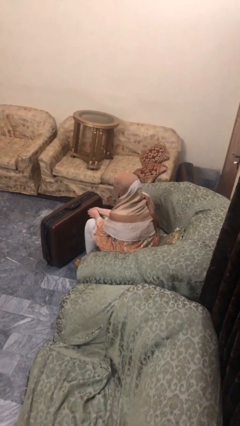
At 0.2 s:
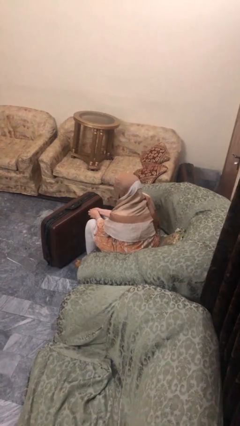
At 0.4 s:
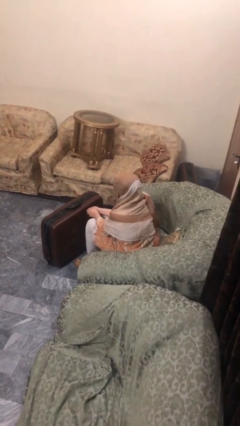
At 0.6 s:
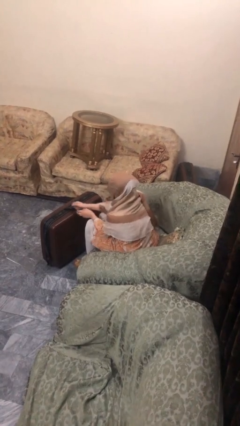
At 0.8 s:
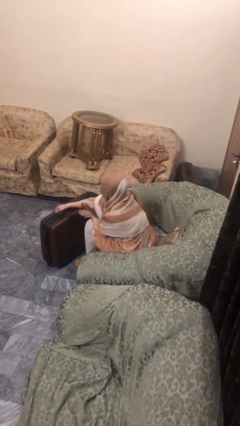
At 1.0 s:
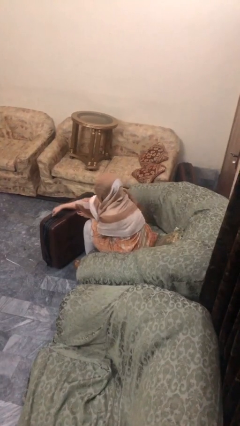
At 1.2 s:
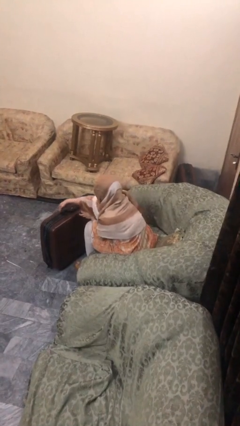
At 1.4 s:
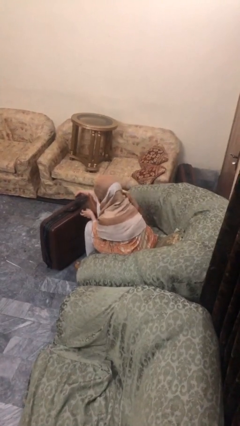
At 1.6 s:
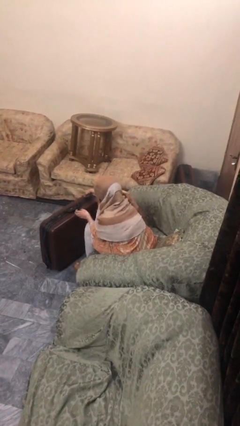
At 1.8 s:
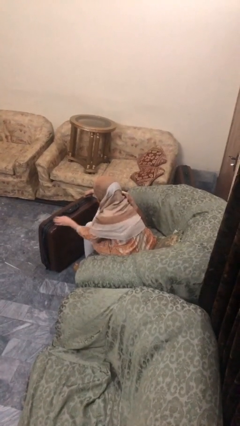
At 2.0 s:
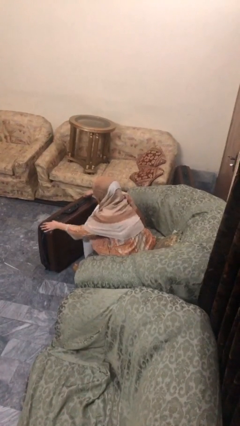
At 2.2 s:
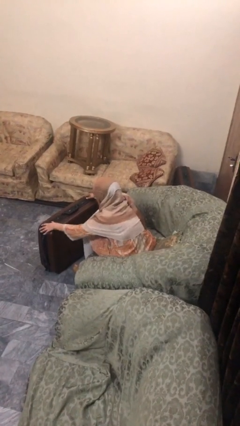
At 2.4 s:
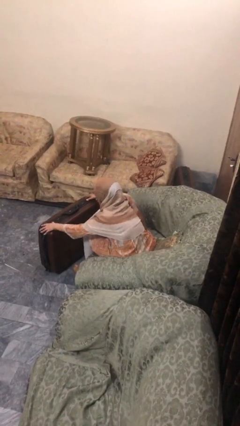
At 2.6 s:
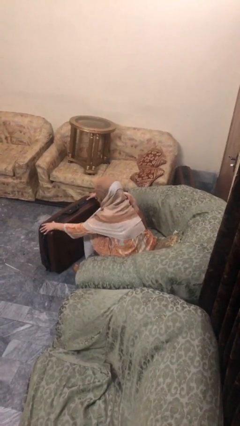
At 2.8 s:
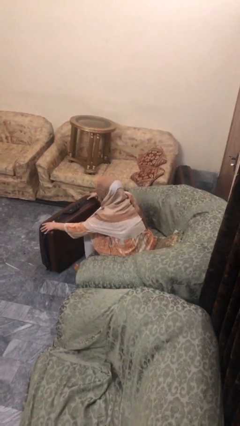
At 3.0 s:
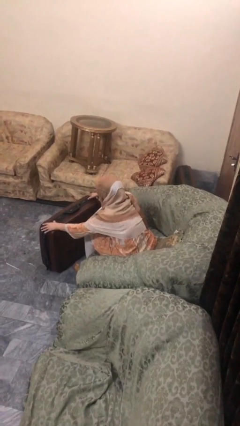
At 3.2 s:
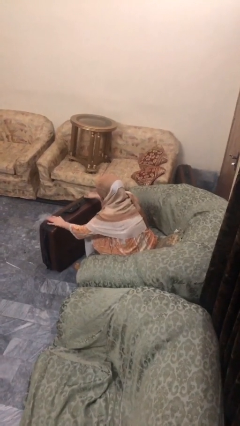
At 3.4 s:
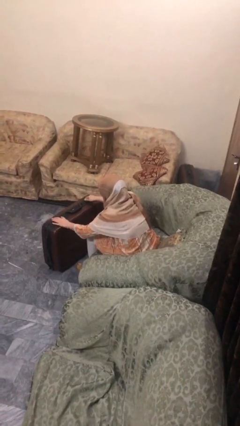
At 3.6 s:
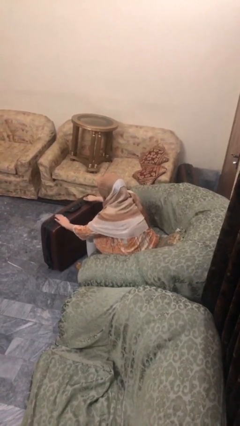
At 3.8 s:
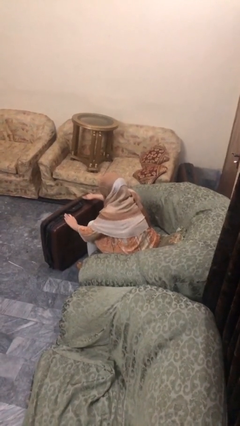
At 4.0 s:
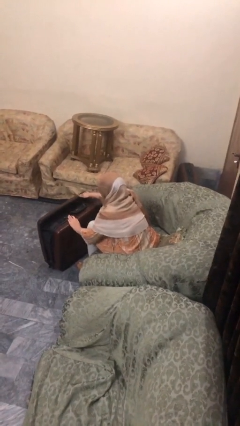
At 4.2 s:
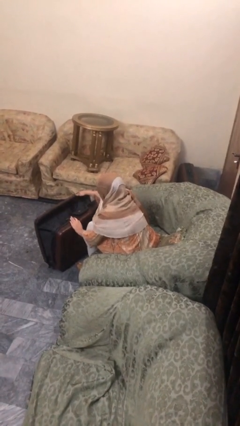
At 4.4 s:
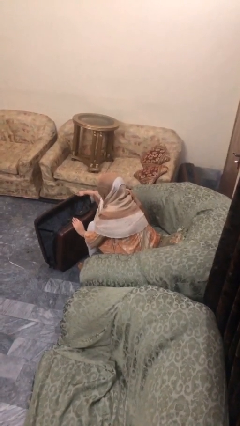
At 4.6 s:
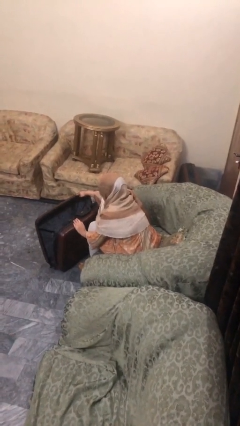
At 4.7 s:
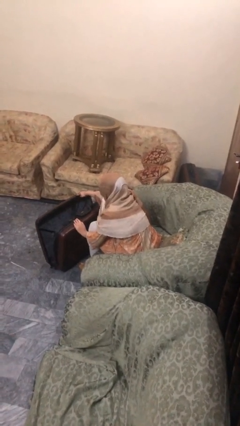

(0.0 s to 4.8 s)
person opens suitcase

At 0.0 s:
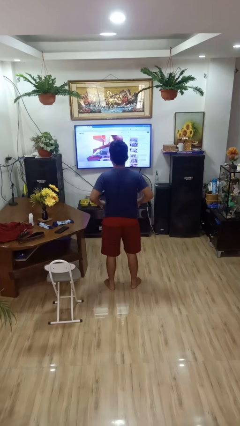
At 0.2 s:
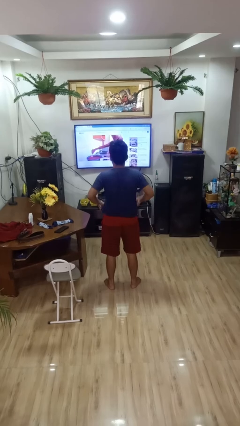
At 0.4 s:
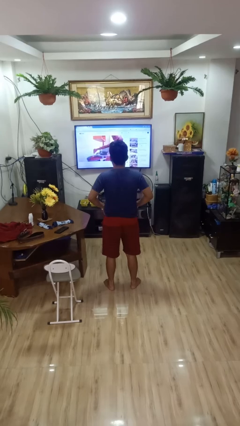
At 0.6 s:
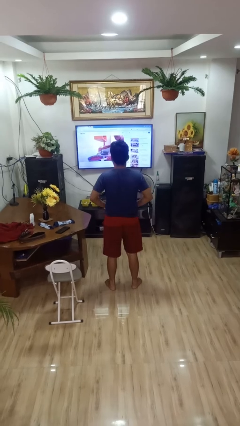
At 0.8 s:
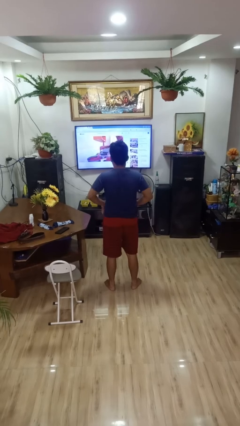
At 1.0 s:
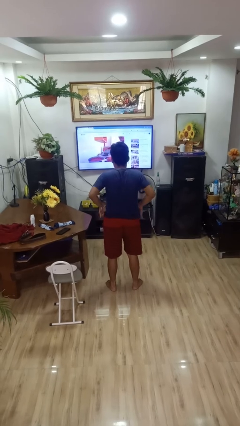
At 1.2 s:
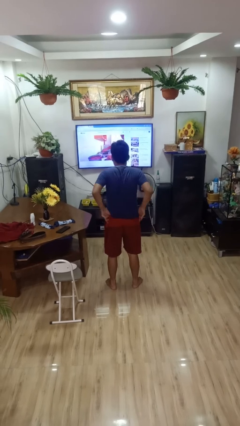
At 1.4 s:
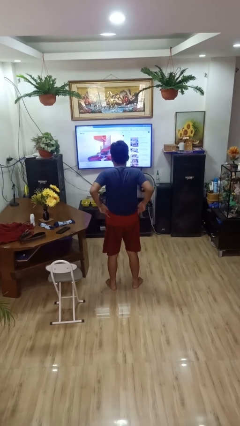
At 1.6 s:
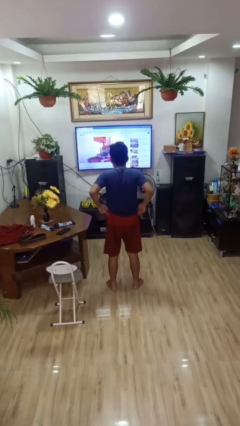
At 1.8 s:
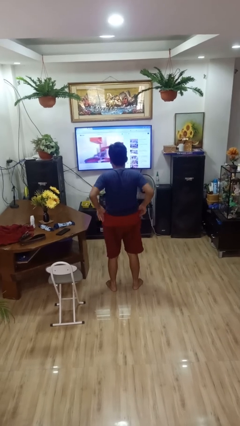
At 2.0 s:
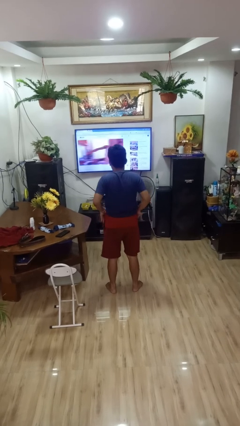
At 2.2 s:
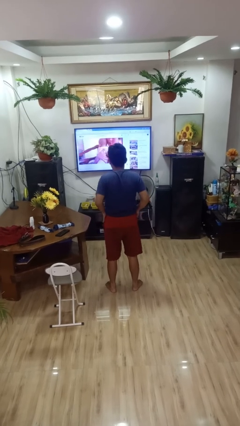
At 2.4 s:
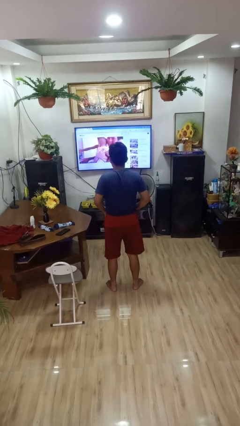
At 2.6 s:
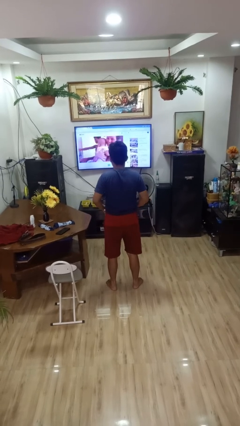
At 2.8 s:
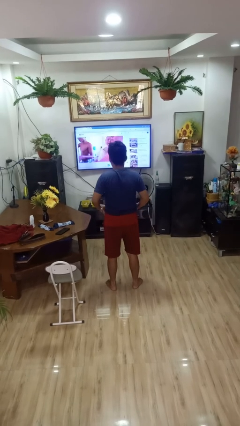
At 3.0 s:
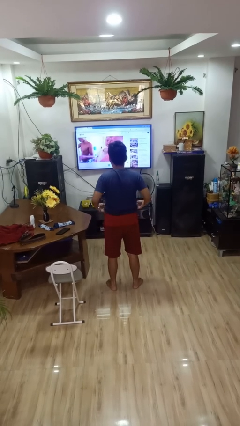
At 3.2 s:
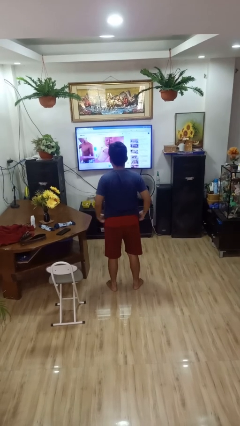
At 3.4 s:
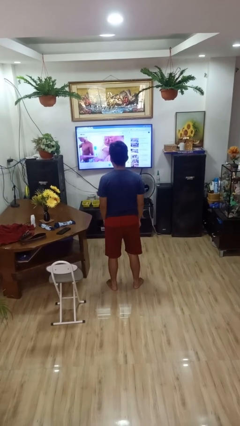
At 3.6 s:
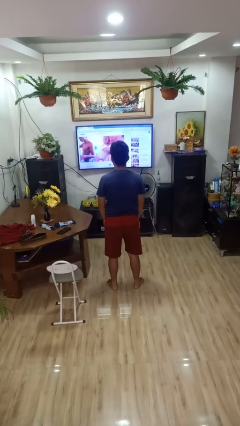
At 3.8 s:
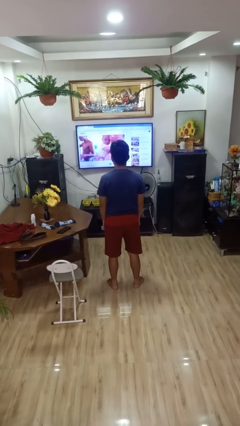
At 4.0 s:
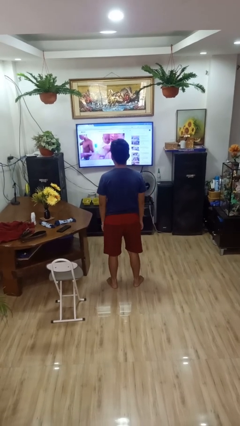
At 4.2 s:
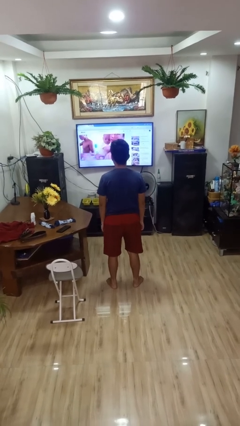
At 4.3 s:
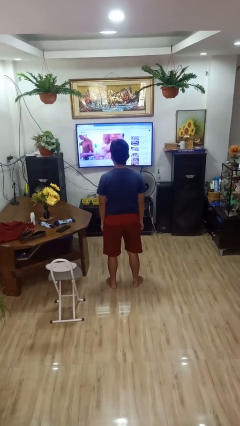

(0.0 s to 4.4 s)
person hikes up pants

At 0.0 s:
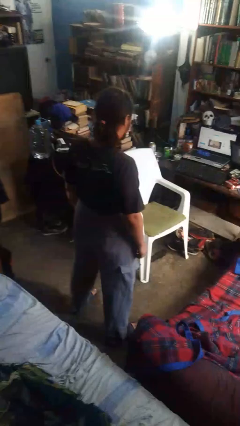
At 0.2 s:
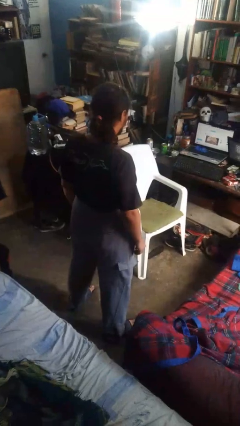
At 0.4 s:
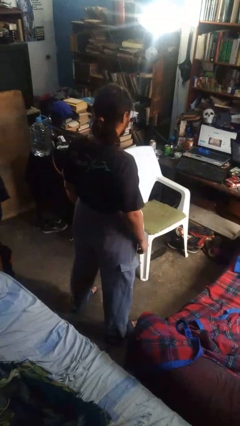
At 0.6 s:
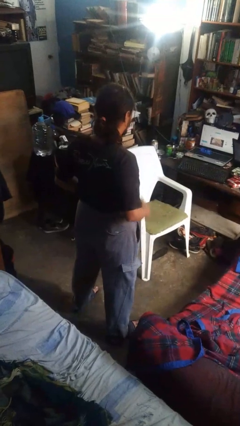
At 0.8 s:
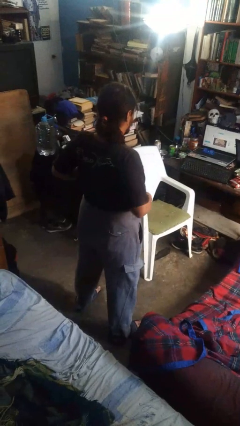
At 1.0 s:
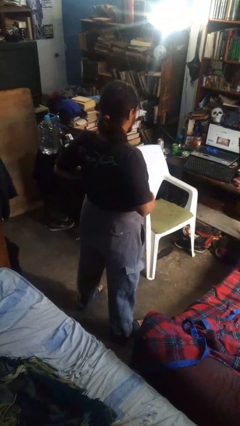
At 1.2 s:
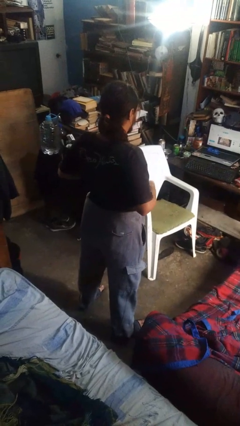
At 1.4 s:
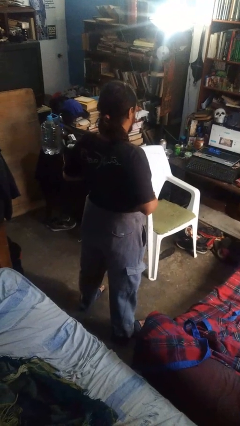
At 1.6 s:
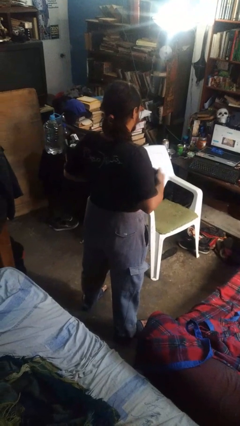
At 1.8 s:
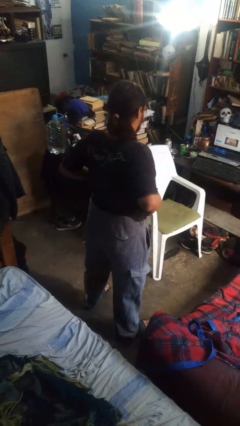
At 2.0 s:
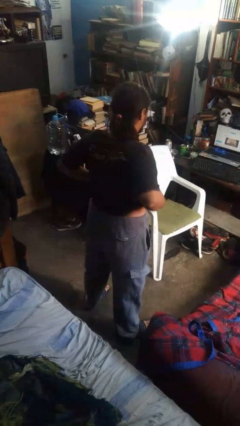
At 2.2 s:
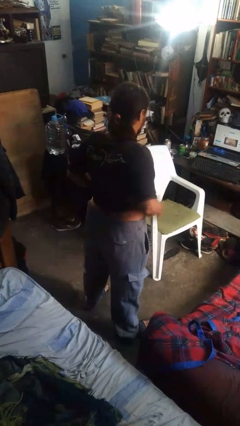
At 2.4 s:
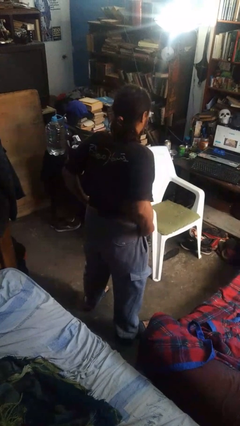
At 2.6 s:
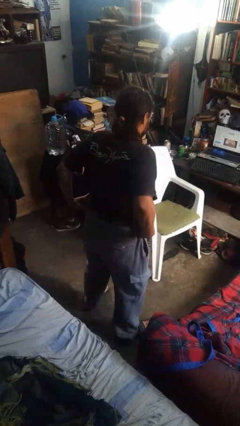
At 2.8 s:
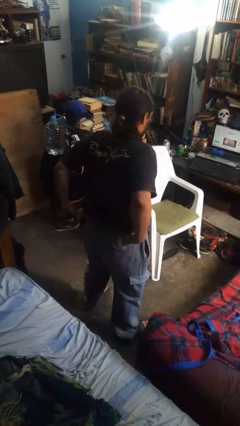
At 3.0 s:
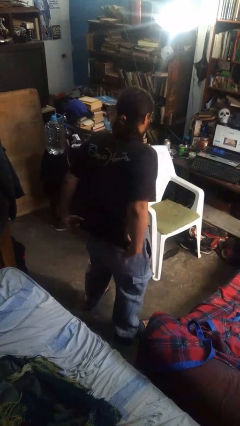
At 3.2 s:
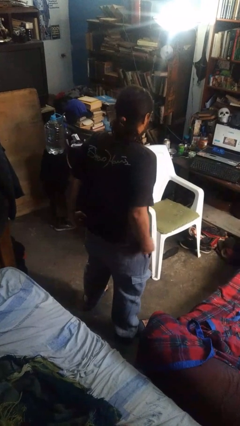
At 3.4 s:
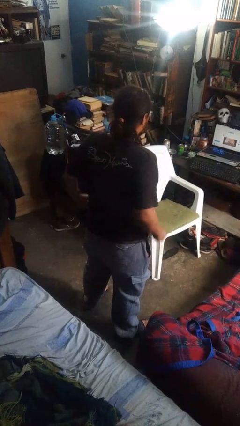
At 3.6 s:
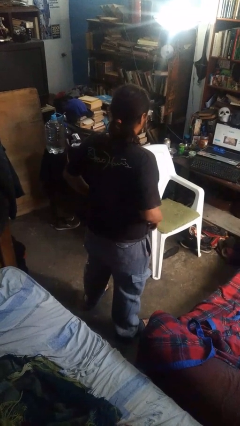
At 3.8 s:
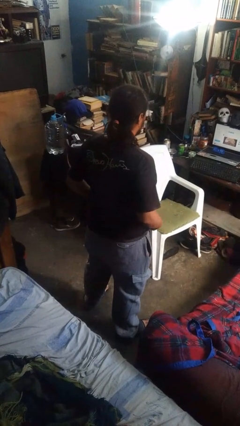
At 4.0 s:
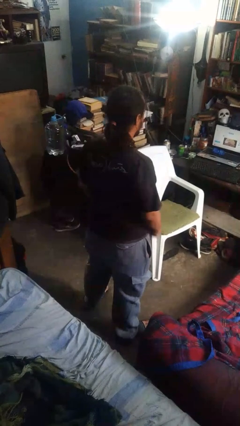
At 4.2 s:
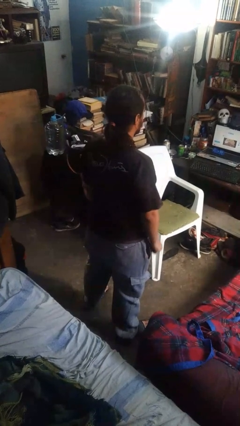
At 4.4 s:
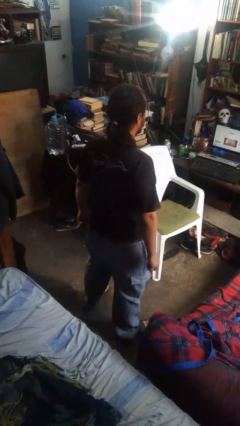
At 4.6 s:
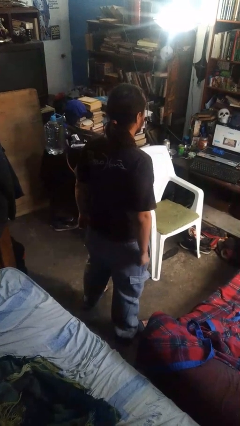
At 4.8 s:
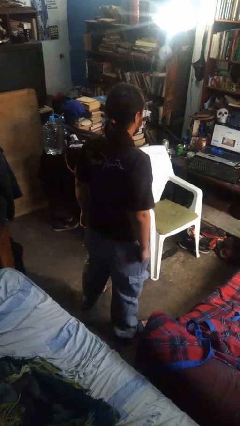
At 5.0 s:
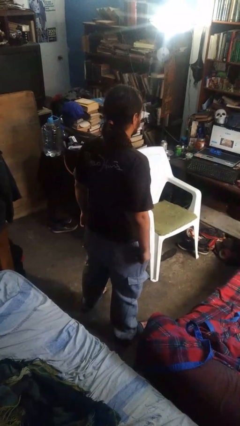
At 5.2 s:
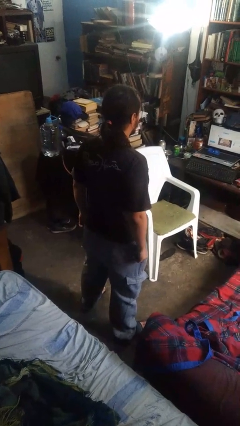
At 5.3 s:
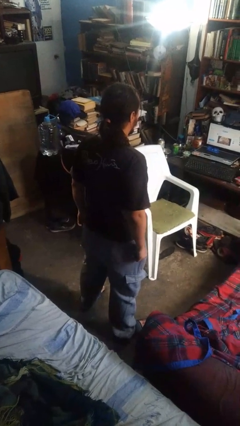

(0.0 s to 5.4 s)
person untucks shirt

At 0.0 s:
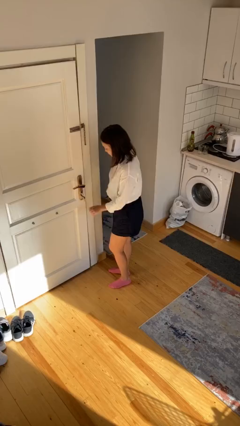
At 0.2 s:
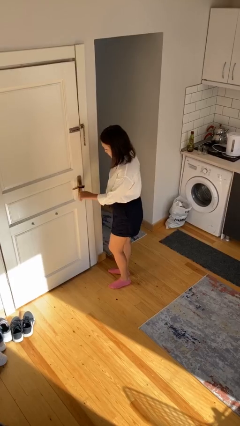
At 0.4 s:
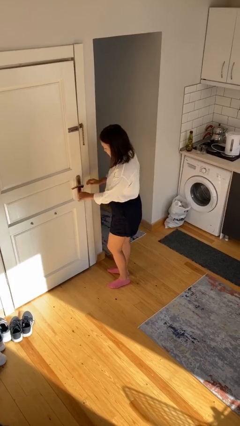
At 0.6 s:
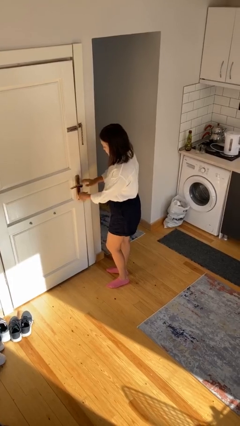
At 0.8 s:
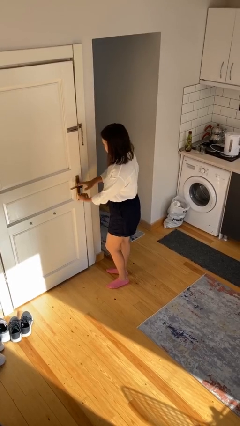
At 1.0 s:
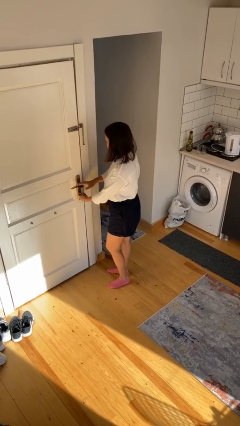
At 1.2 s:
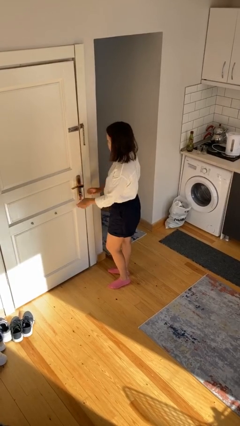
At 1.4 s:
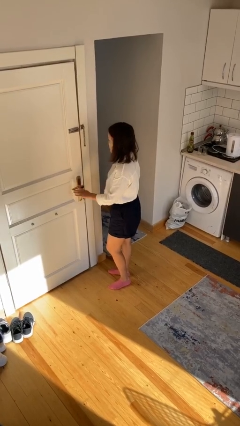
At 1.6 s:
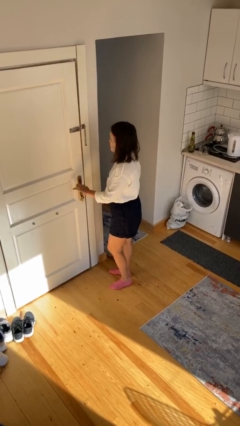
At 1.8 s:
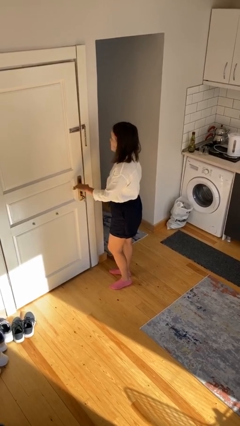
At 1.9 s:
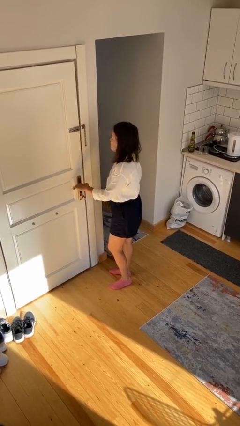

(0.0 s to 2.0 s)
person unlocks door with keys

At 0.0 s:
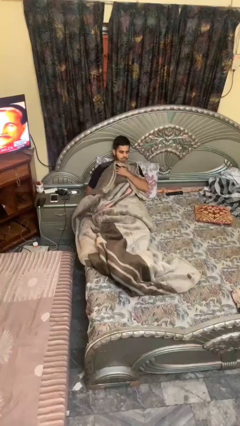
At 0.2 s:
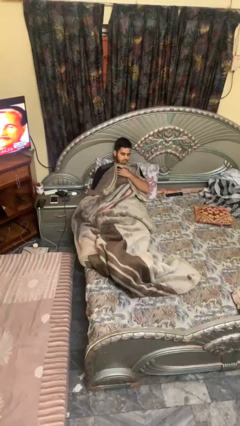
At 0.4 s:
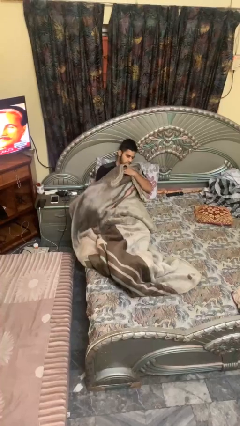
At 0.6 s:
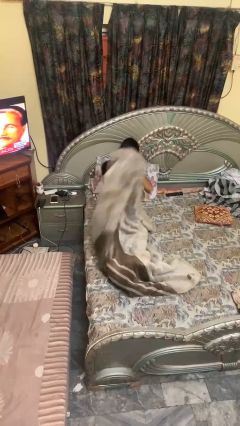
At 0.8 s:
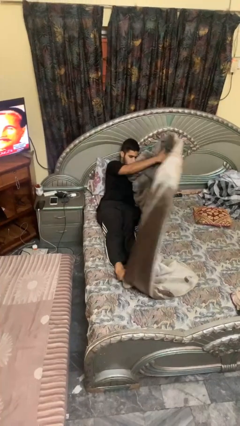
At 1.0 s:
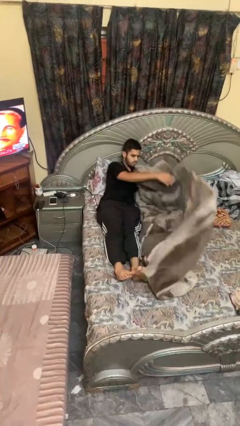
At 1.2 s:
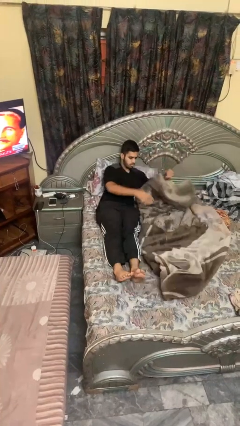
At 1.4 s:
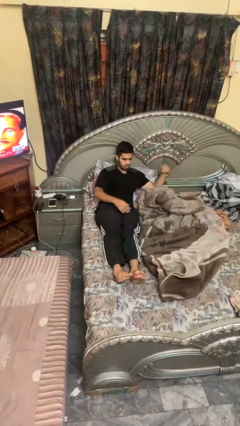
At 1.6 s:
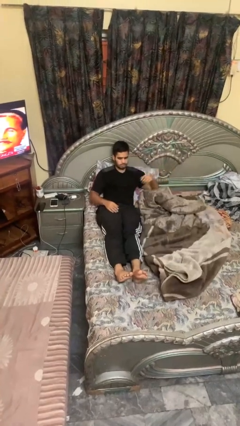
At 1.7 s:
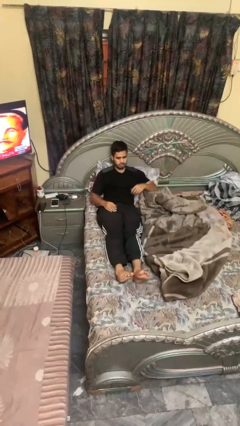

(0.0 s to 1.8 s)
person uncovers with blanket
